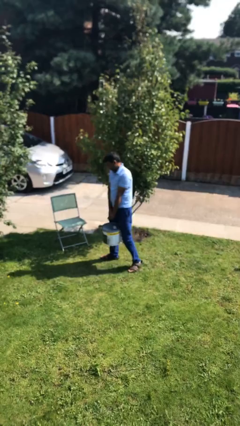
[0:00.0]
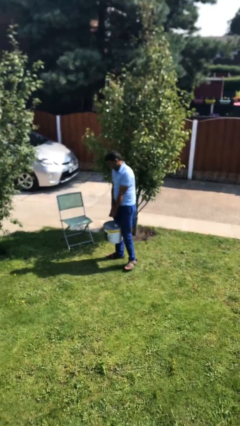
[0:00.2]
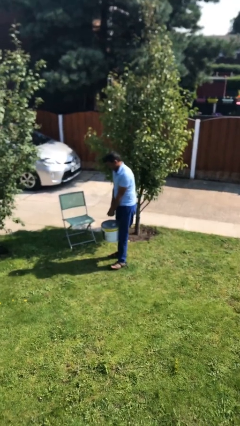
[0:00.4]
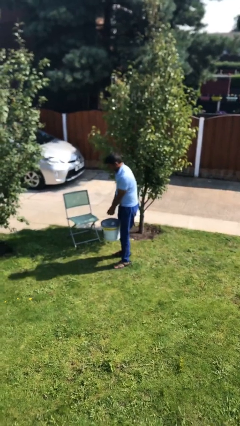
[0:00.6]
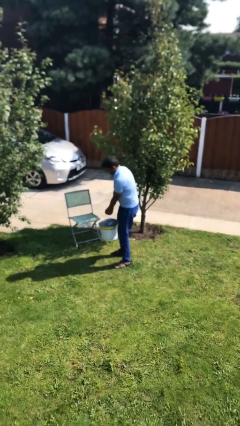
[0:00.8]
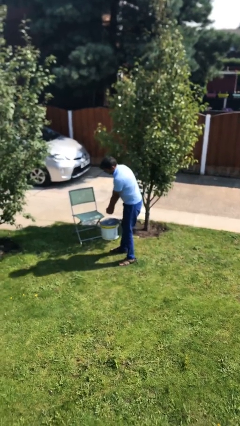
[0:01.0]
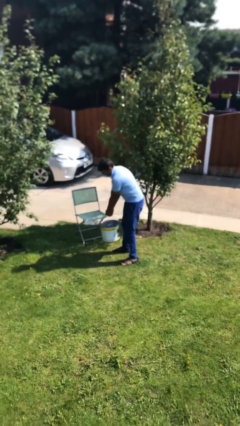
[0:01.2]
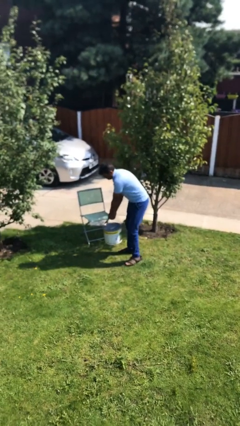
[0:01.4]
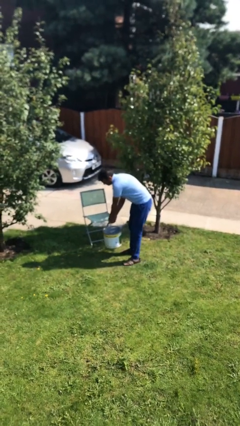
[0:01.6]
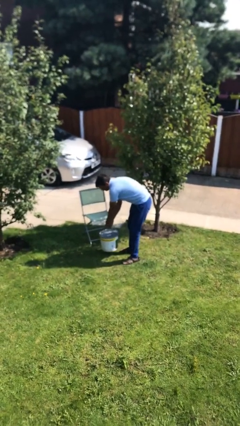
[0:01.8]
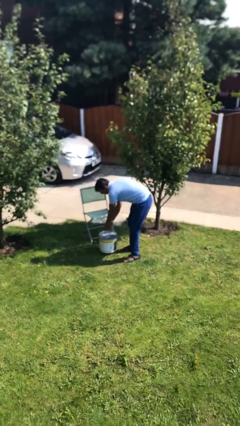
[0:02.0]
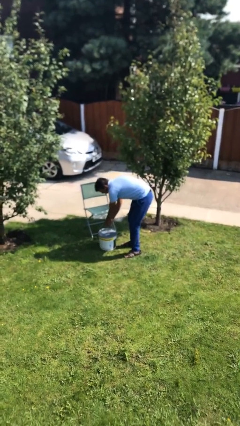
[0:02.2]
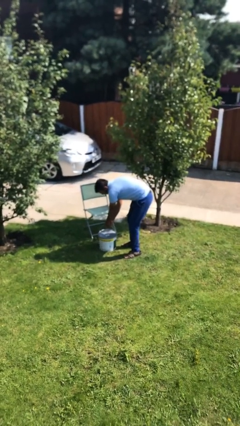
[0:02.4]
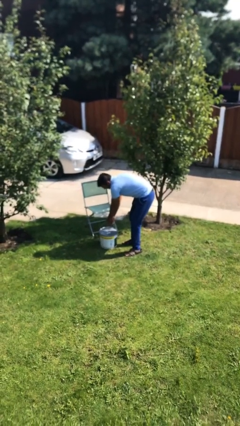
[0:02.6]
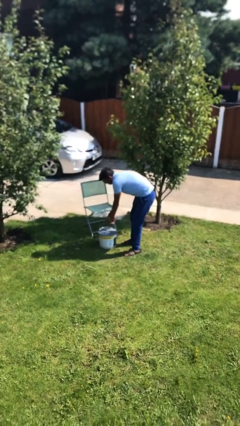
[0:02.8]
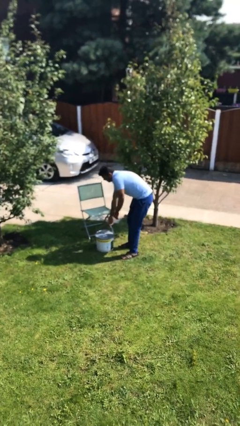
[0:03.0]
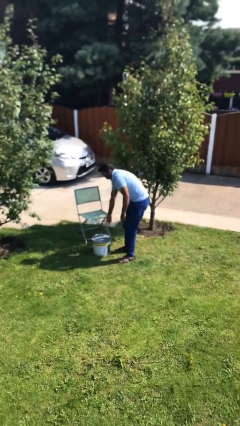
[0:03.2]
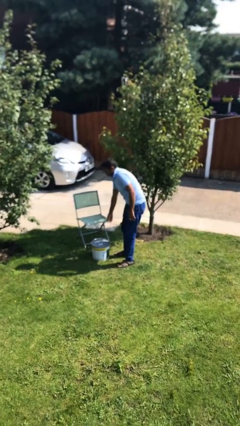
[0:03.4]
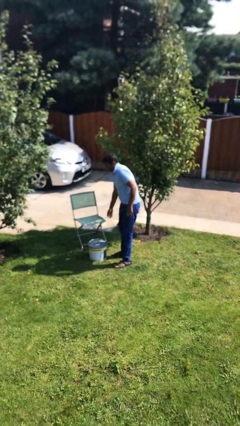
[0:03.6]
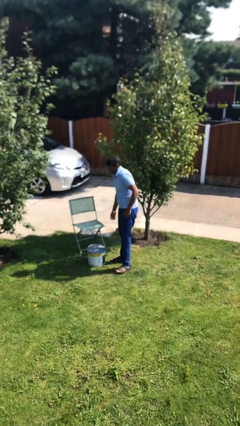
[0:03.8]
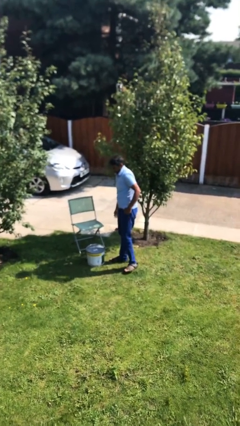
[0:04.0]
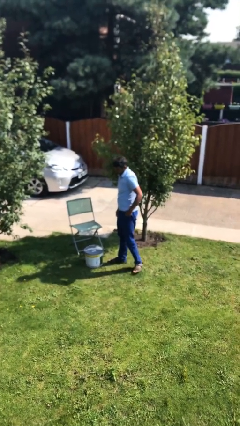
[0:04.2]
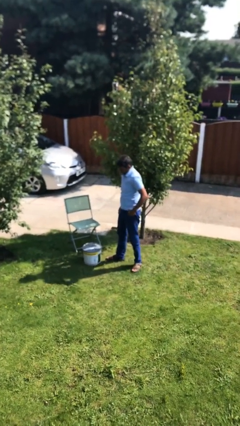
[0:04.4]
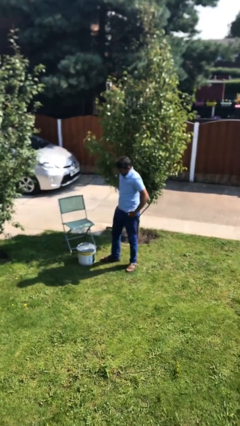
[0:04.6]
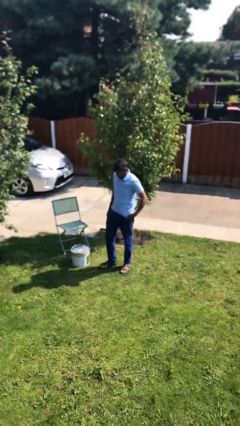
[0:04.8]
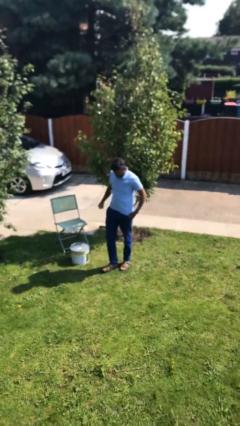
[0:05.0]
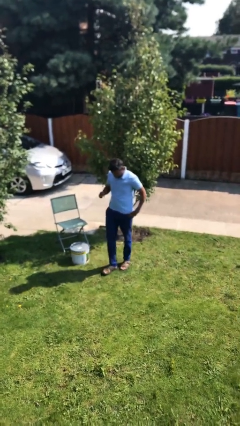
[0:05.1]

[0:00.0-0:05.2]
person puts down object on floor

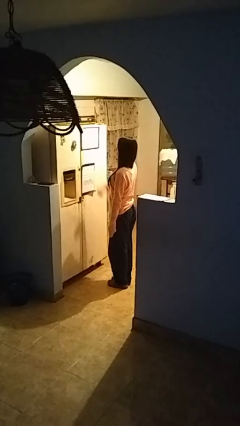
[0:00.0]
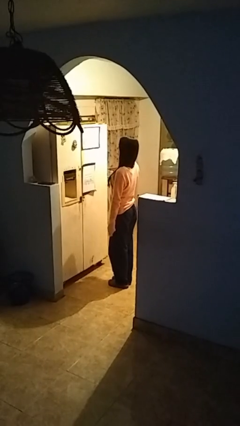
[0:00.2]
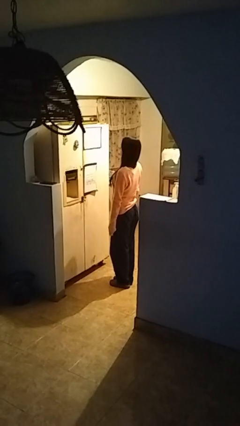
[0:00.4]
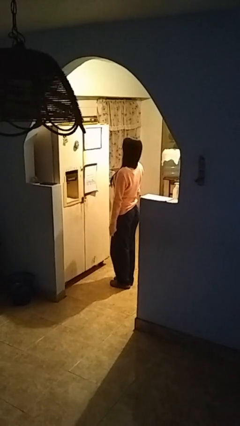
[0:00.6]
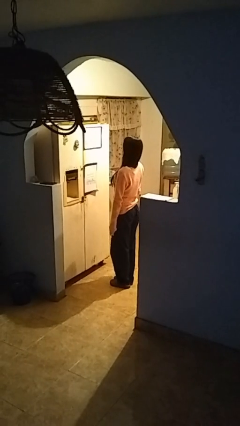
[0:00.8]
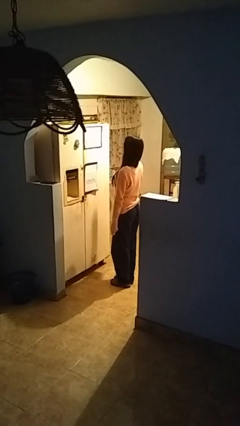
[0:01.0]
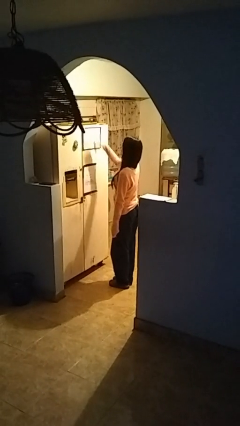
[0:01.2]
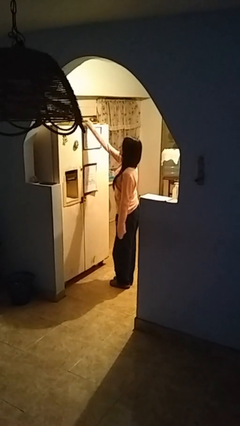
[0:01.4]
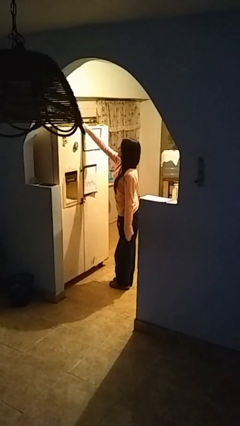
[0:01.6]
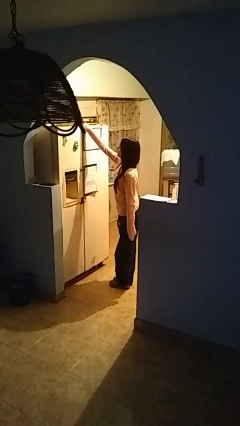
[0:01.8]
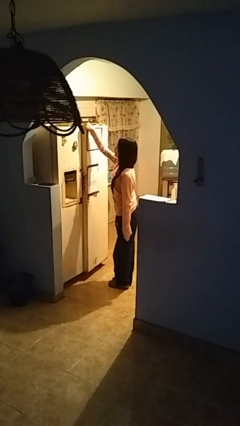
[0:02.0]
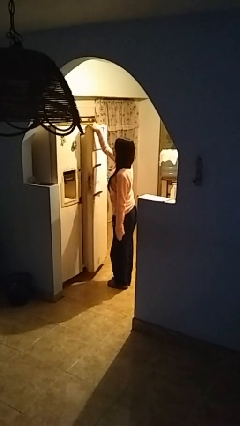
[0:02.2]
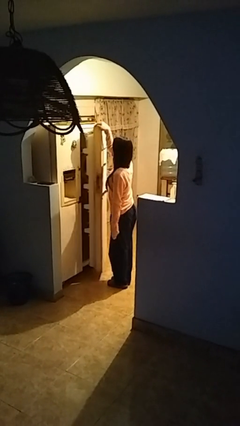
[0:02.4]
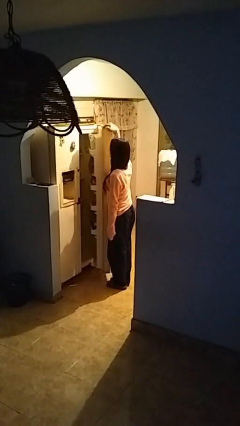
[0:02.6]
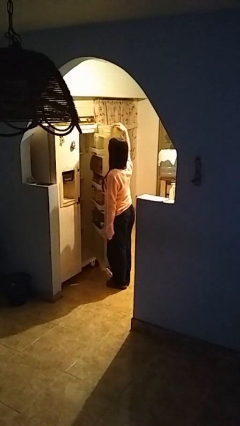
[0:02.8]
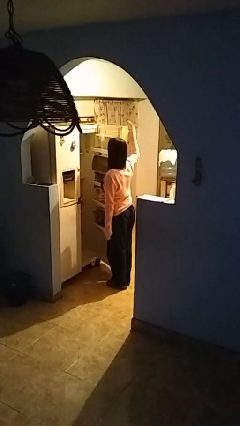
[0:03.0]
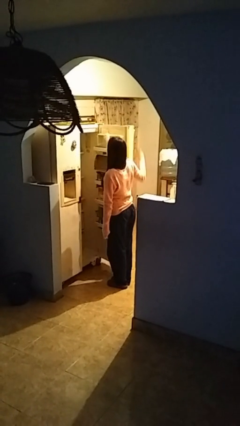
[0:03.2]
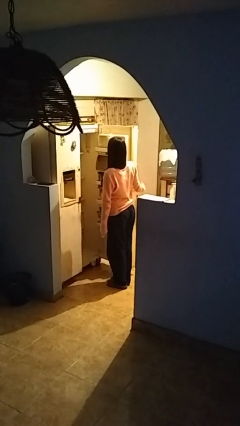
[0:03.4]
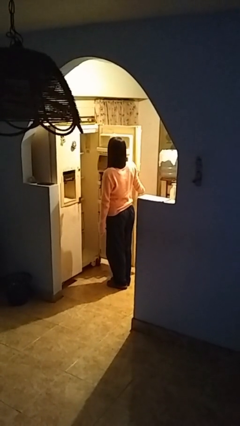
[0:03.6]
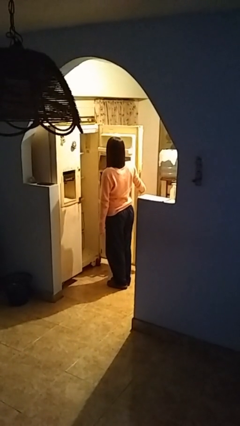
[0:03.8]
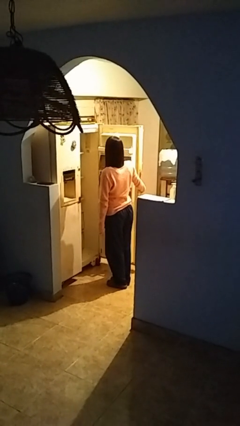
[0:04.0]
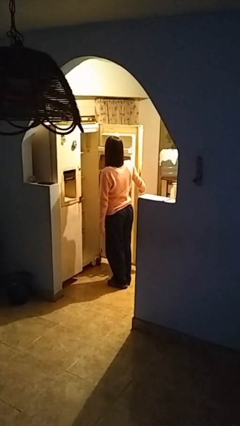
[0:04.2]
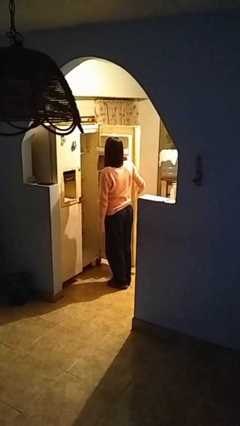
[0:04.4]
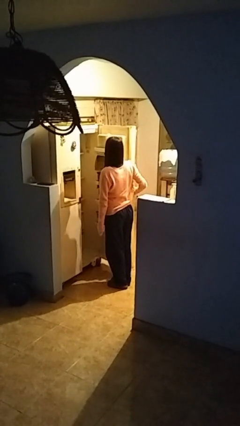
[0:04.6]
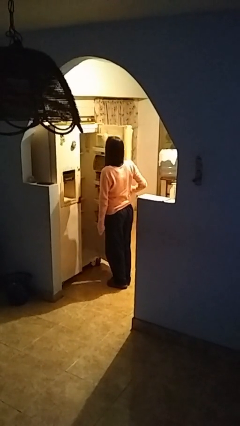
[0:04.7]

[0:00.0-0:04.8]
person opens refrigerator

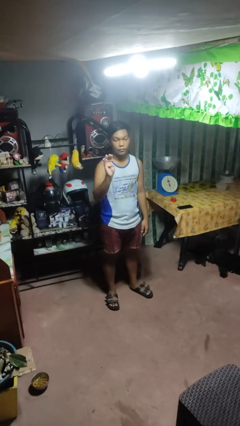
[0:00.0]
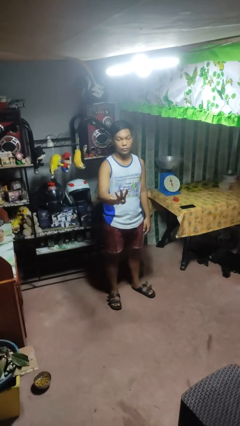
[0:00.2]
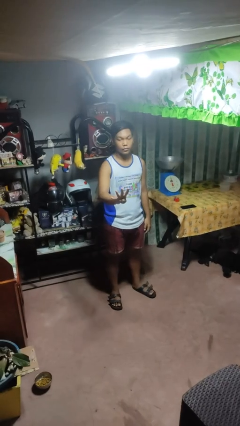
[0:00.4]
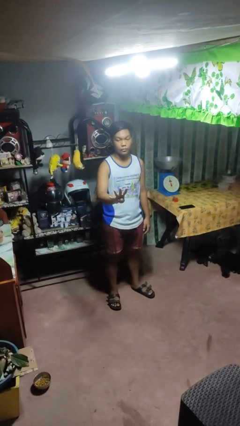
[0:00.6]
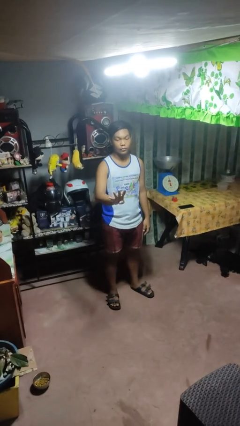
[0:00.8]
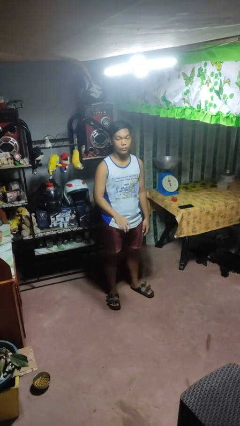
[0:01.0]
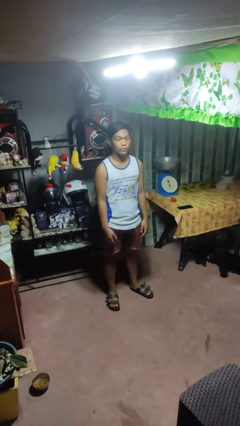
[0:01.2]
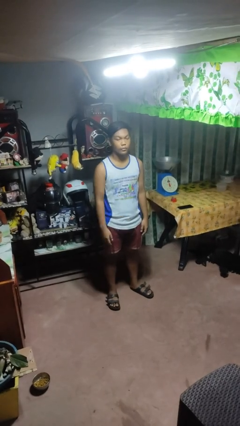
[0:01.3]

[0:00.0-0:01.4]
person gestures number four

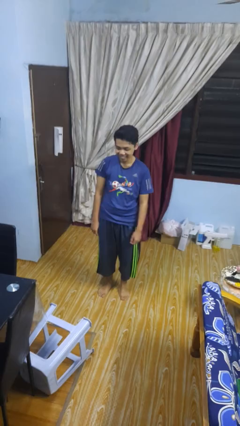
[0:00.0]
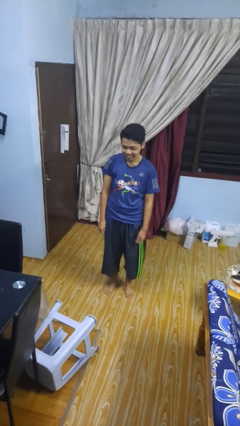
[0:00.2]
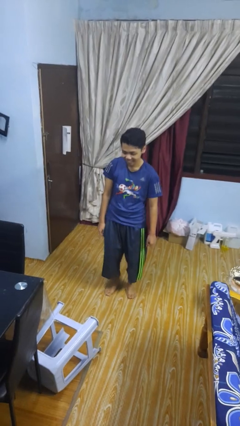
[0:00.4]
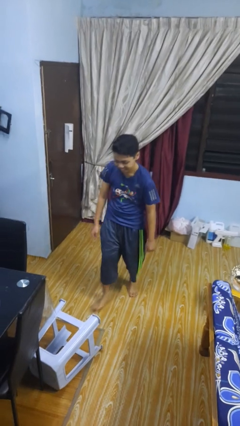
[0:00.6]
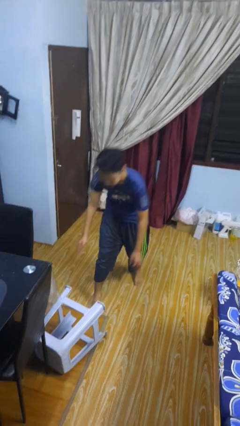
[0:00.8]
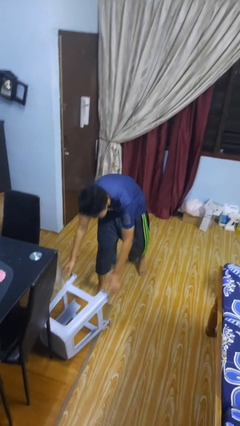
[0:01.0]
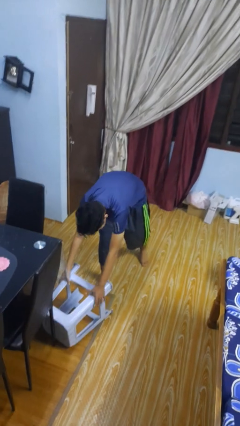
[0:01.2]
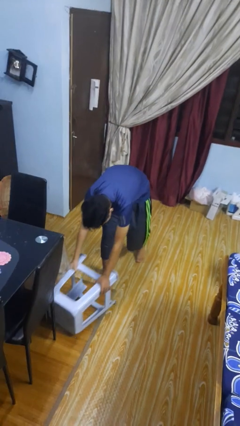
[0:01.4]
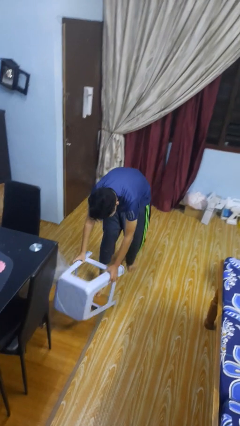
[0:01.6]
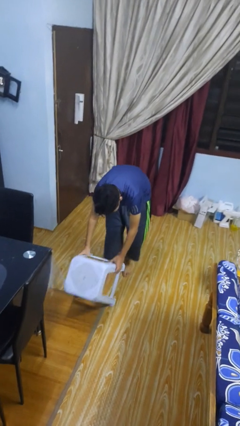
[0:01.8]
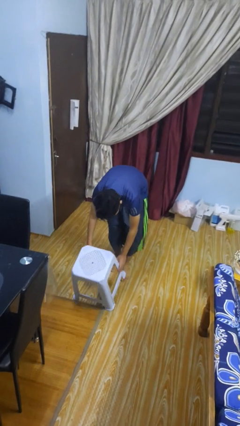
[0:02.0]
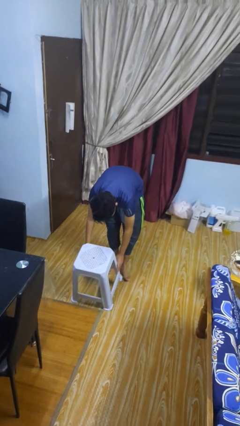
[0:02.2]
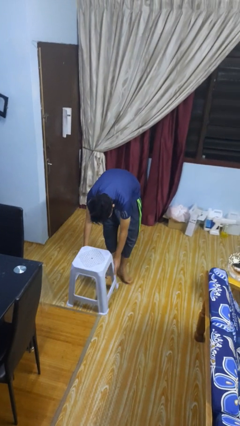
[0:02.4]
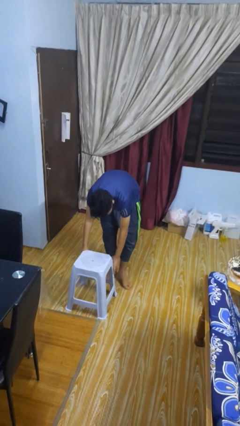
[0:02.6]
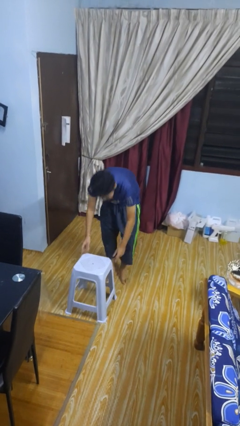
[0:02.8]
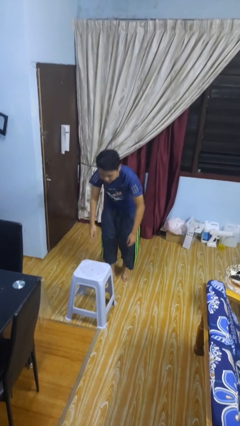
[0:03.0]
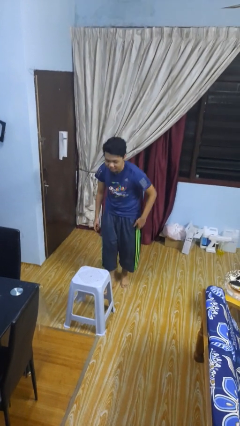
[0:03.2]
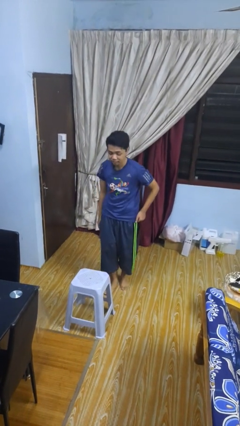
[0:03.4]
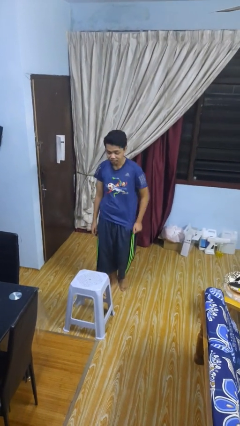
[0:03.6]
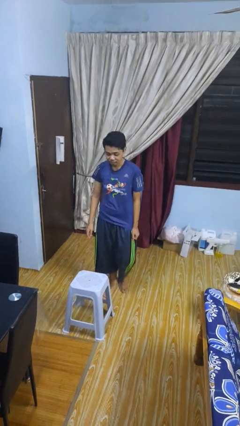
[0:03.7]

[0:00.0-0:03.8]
person sets upright furniture

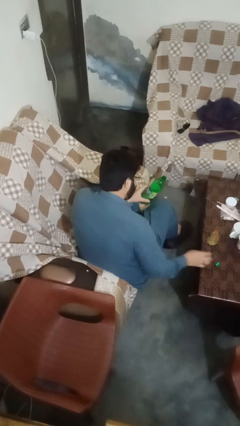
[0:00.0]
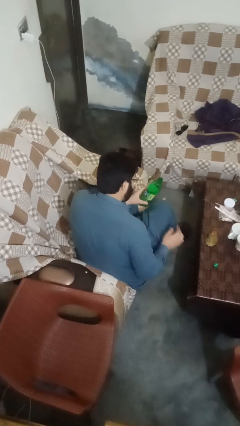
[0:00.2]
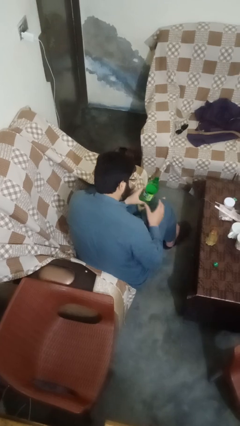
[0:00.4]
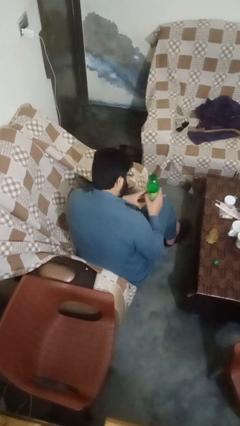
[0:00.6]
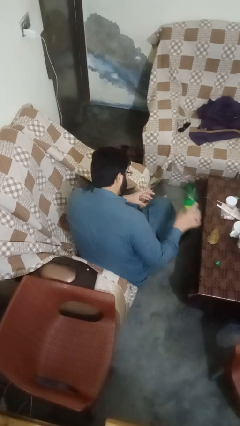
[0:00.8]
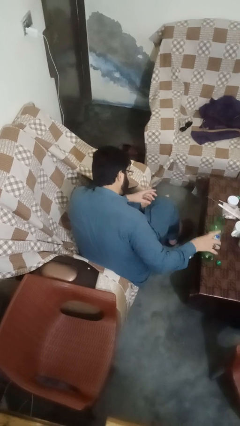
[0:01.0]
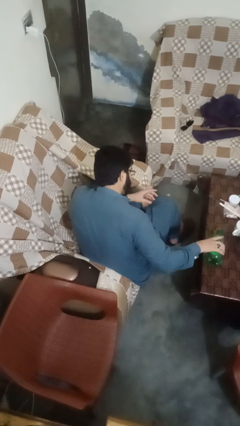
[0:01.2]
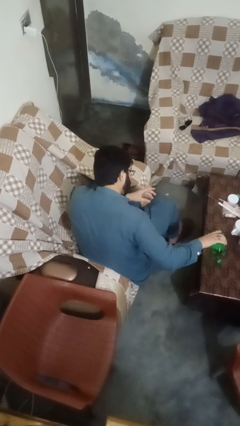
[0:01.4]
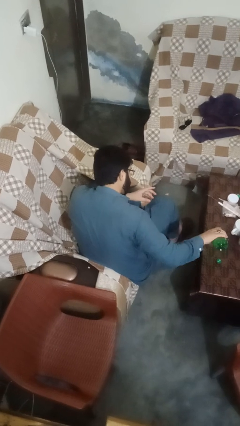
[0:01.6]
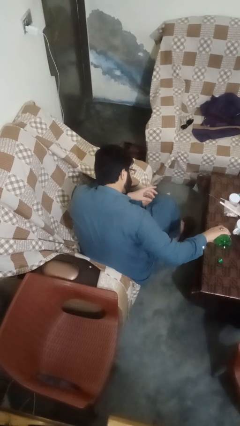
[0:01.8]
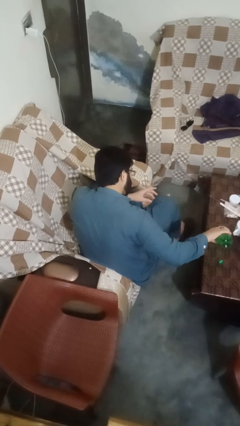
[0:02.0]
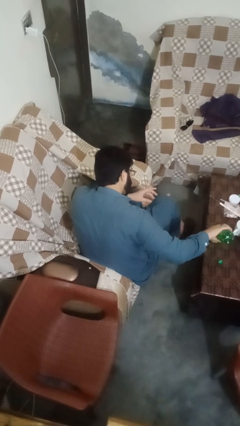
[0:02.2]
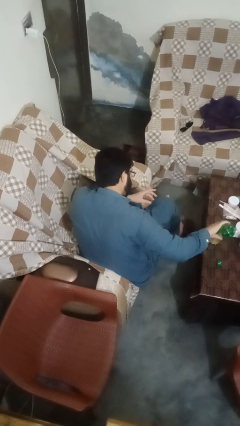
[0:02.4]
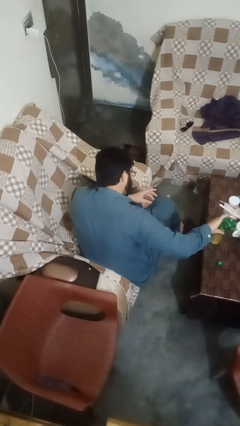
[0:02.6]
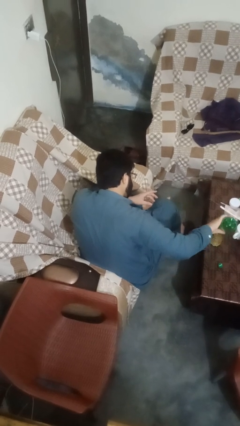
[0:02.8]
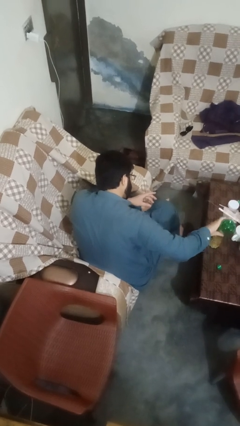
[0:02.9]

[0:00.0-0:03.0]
person pours liquid into cup
